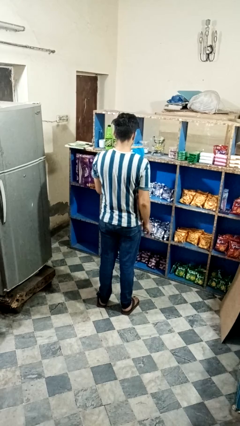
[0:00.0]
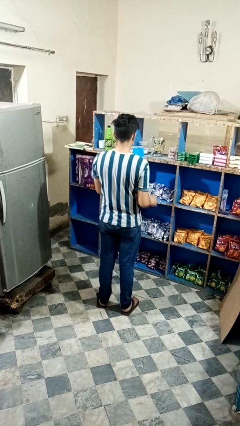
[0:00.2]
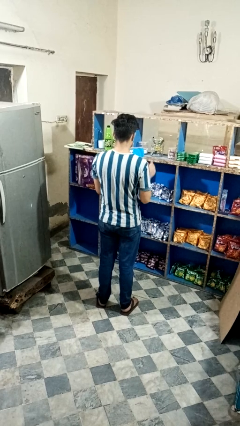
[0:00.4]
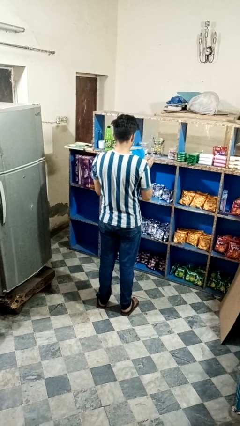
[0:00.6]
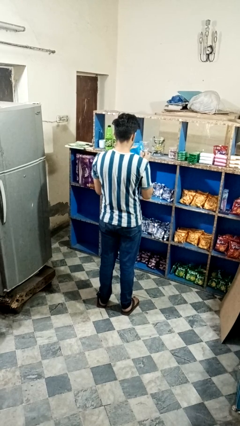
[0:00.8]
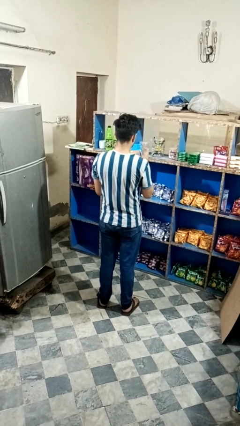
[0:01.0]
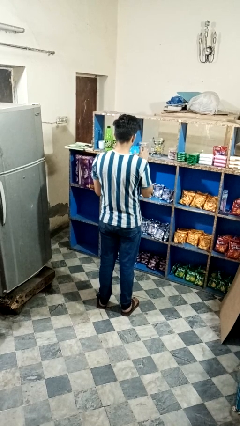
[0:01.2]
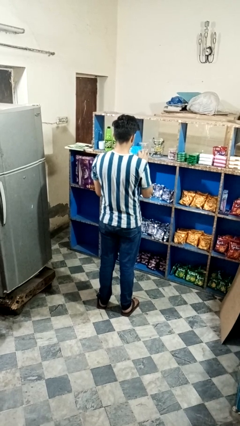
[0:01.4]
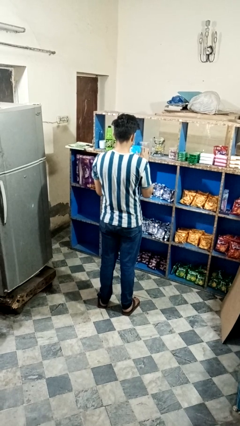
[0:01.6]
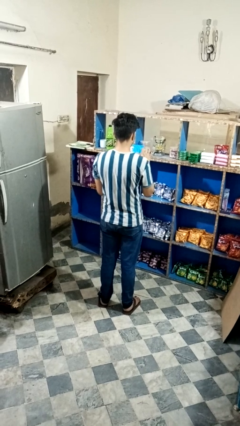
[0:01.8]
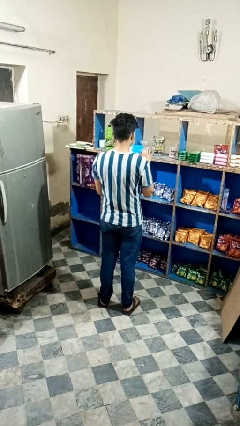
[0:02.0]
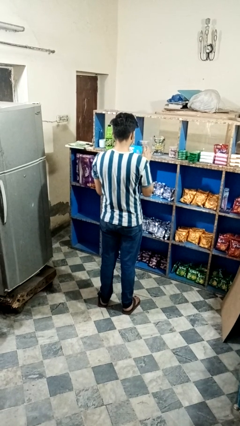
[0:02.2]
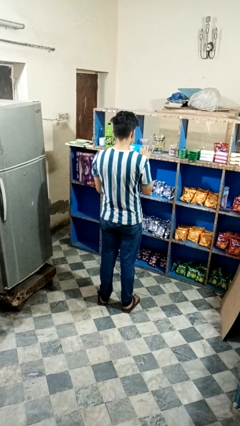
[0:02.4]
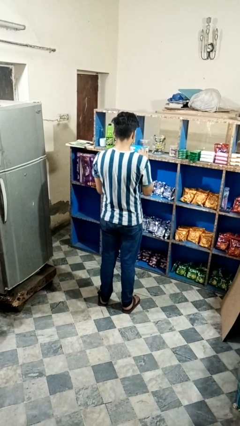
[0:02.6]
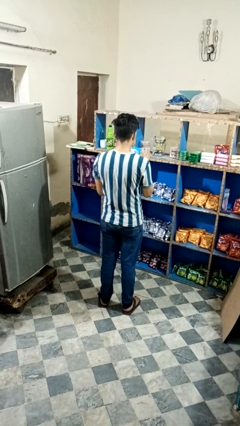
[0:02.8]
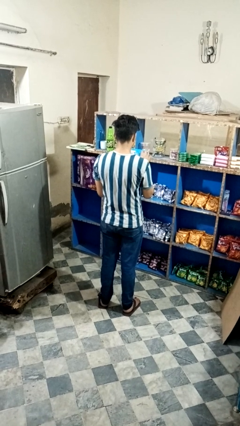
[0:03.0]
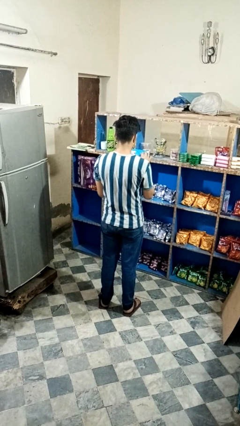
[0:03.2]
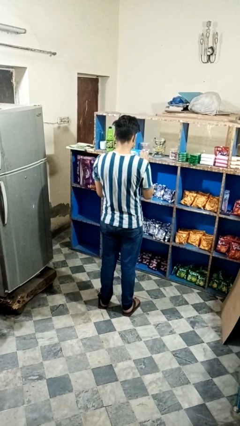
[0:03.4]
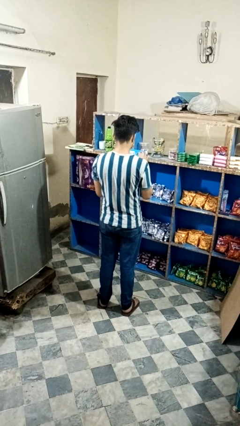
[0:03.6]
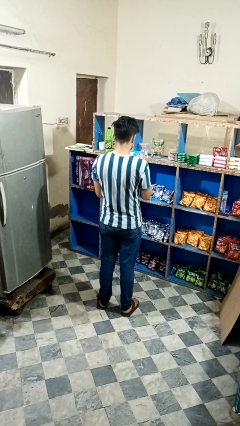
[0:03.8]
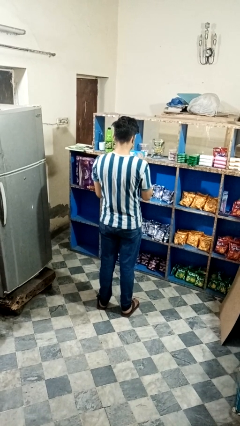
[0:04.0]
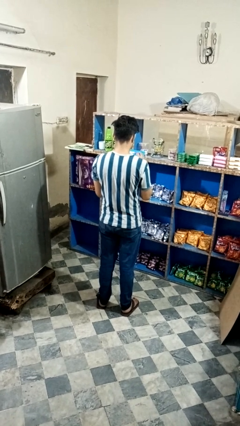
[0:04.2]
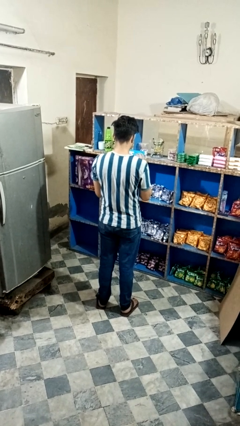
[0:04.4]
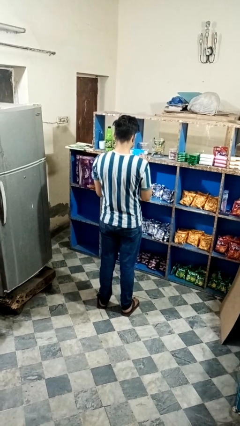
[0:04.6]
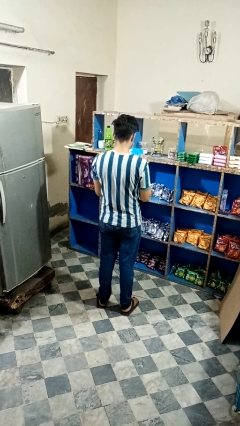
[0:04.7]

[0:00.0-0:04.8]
person taps object with finger

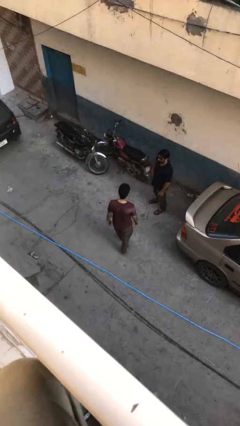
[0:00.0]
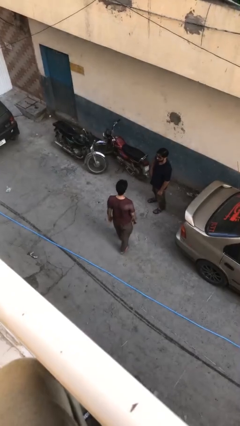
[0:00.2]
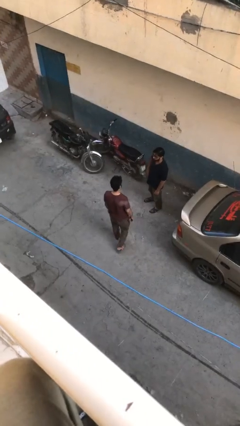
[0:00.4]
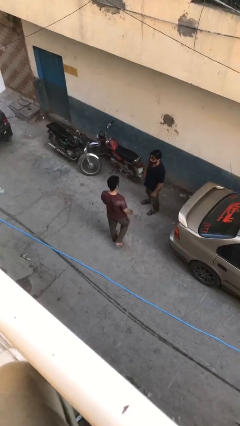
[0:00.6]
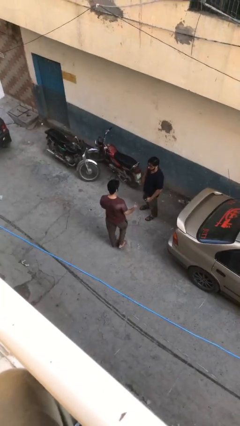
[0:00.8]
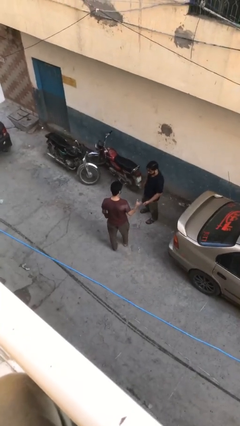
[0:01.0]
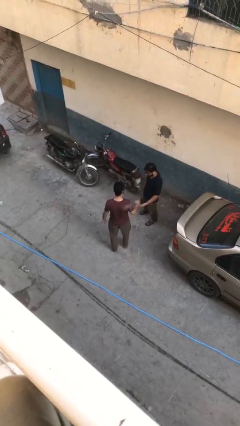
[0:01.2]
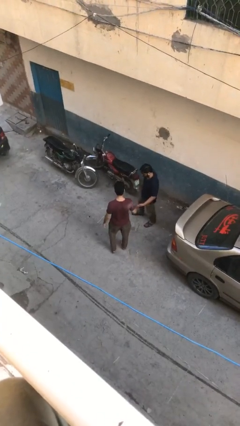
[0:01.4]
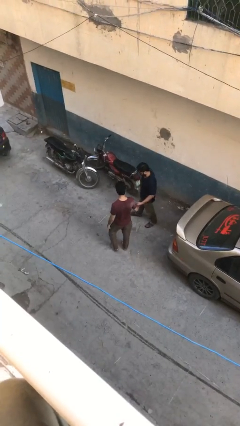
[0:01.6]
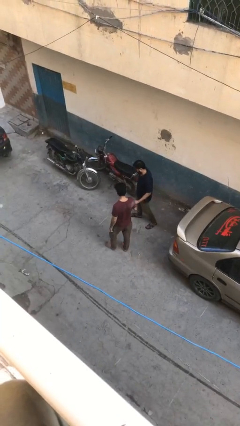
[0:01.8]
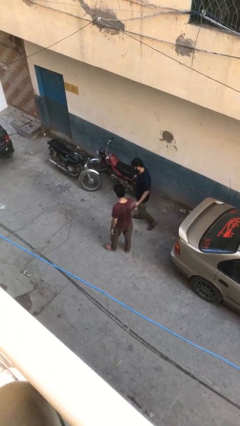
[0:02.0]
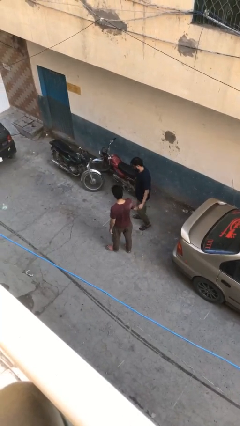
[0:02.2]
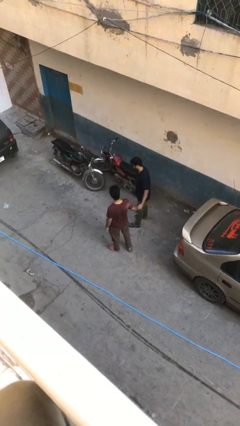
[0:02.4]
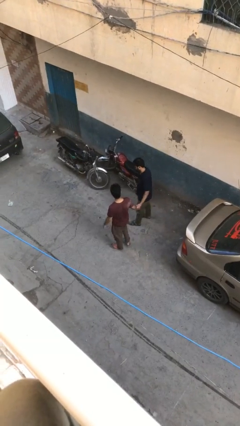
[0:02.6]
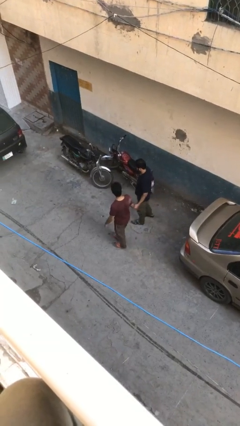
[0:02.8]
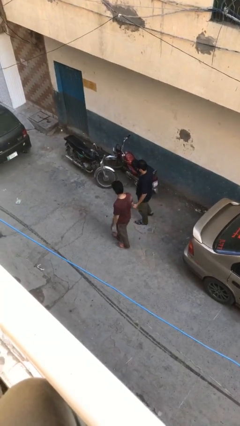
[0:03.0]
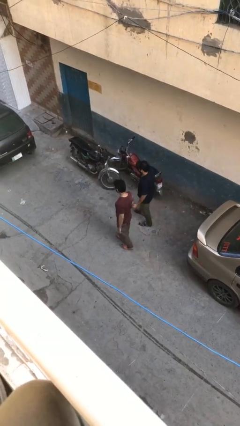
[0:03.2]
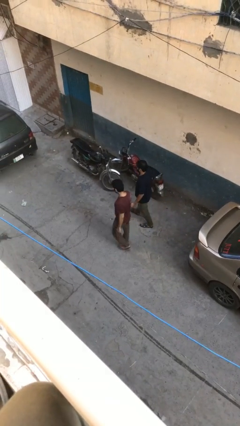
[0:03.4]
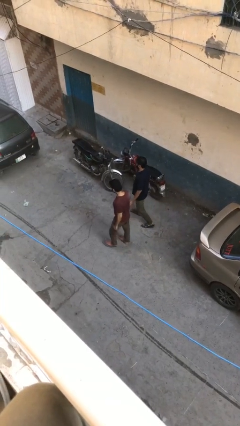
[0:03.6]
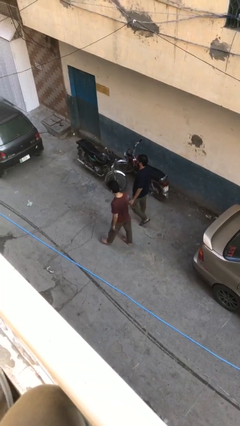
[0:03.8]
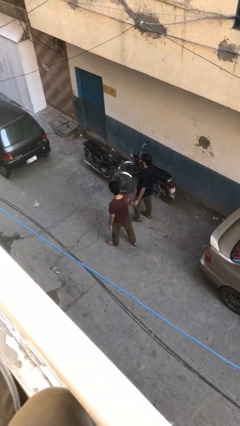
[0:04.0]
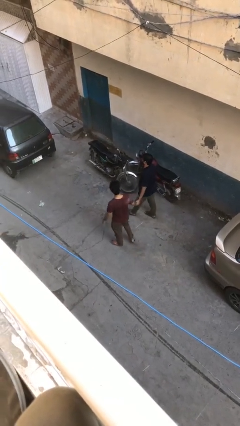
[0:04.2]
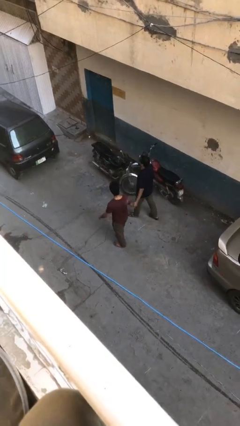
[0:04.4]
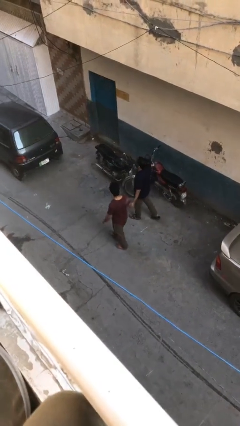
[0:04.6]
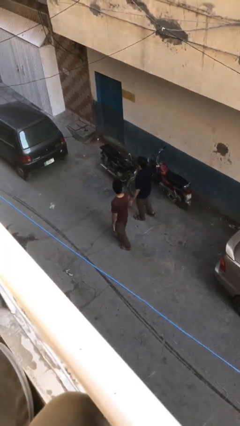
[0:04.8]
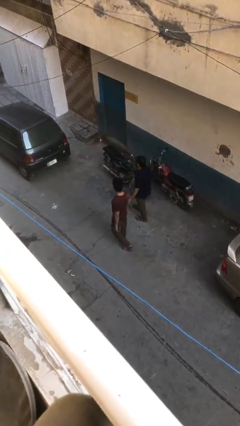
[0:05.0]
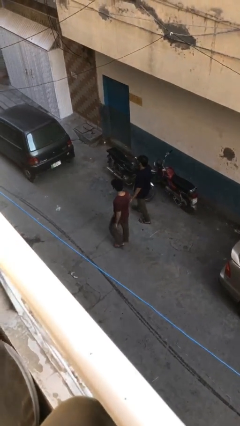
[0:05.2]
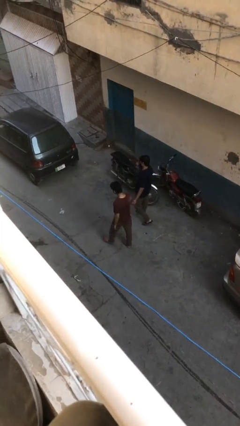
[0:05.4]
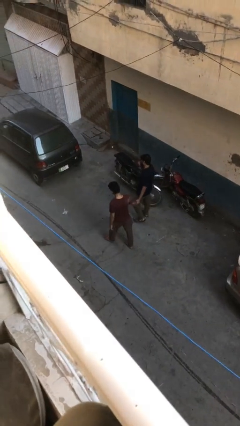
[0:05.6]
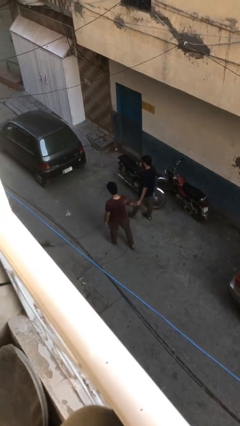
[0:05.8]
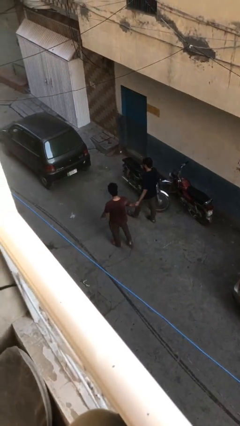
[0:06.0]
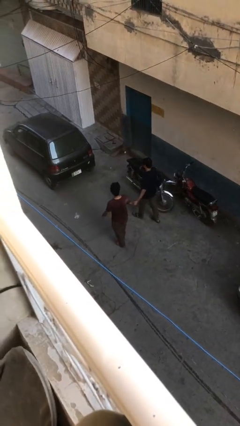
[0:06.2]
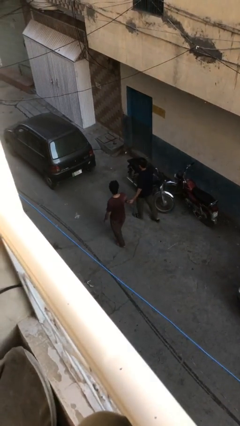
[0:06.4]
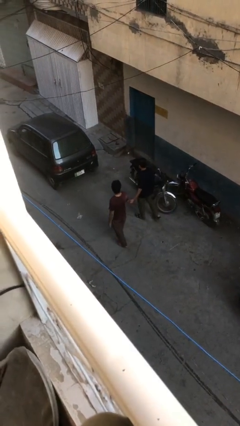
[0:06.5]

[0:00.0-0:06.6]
person holds hand

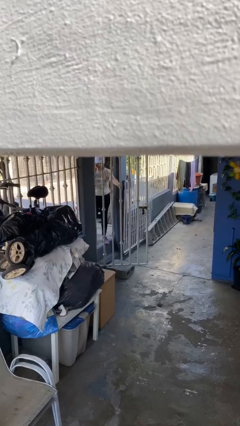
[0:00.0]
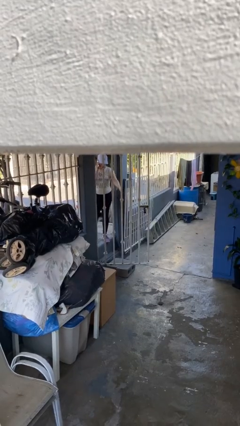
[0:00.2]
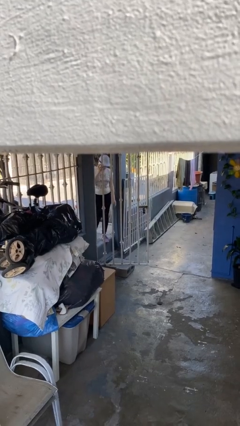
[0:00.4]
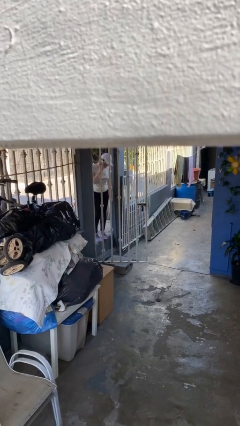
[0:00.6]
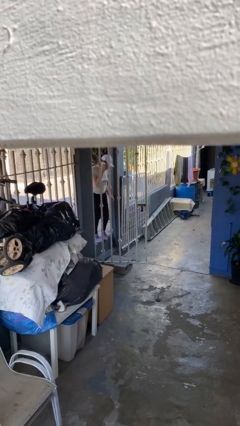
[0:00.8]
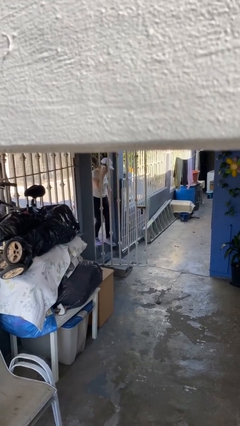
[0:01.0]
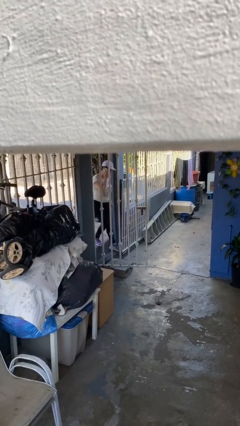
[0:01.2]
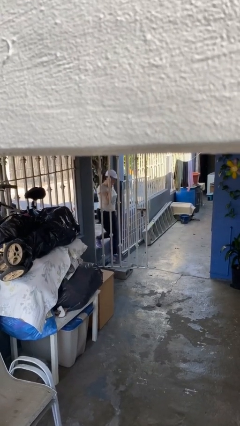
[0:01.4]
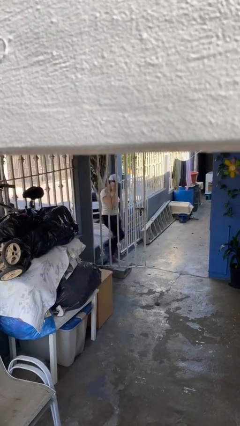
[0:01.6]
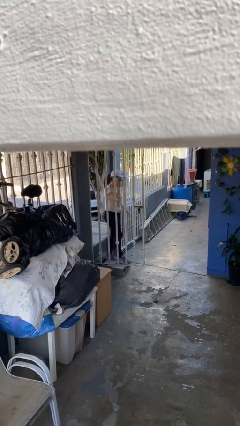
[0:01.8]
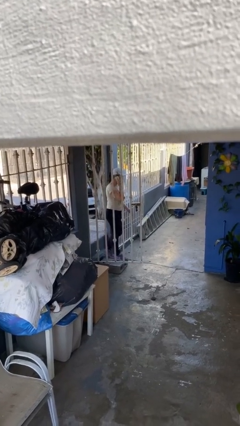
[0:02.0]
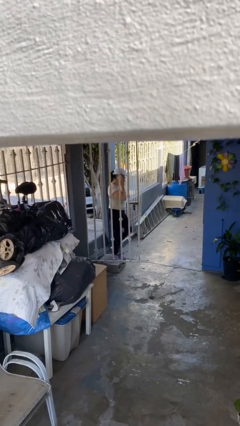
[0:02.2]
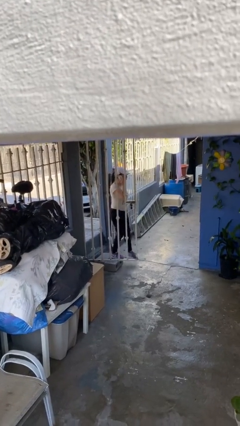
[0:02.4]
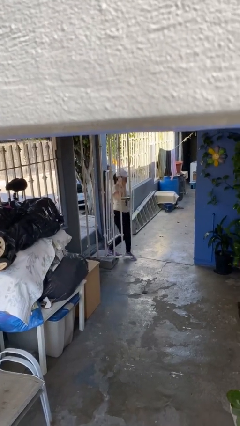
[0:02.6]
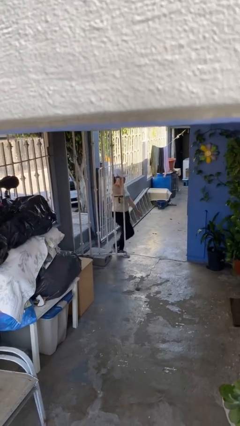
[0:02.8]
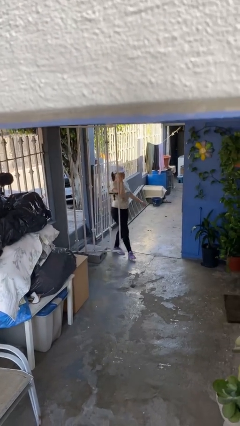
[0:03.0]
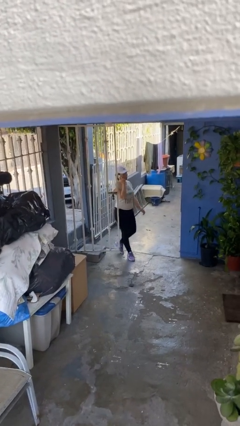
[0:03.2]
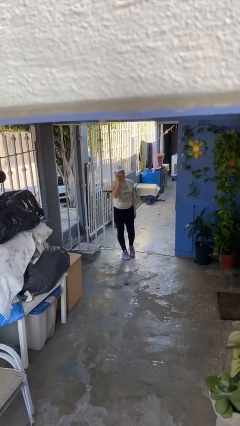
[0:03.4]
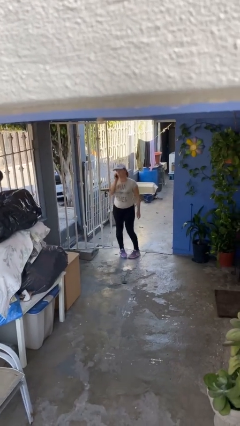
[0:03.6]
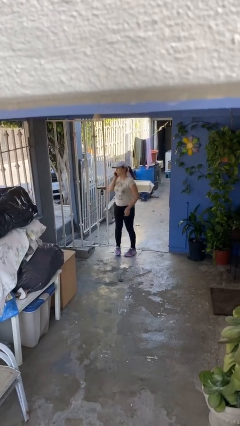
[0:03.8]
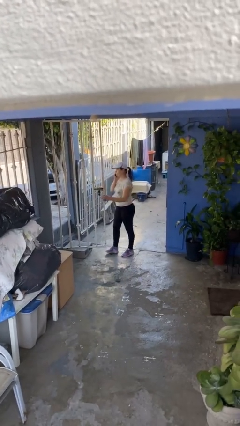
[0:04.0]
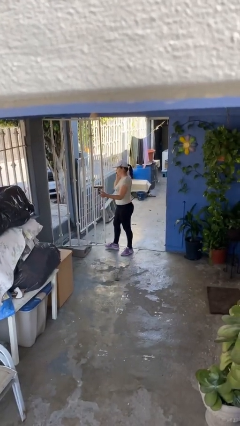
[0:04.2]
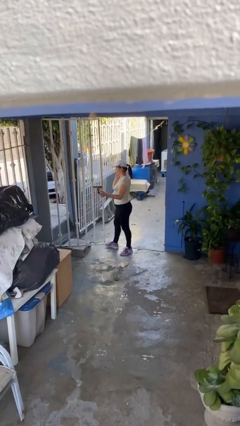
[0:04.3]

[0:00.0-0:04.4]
person enters scene through structure

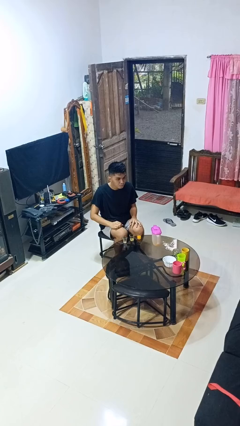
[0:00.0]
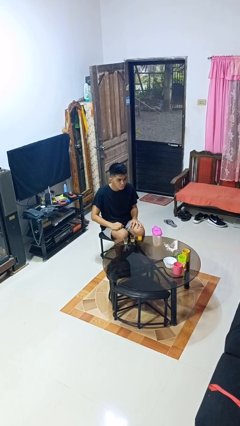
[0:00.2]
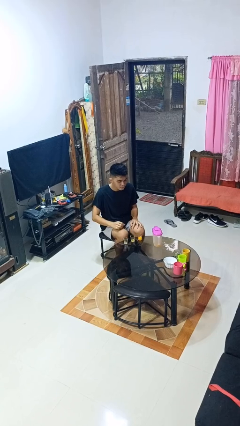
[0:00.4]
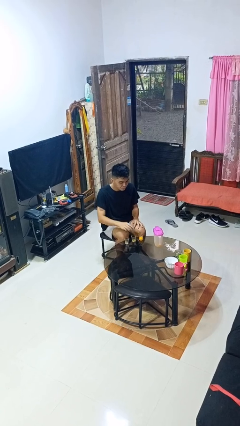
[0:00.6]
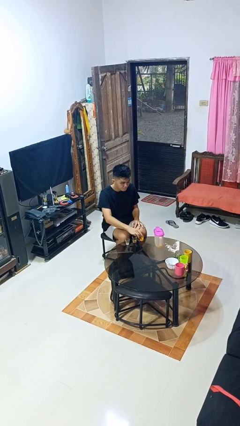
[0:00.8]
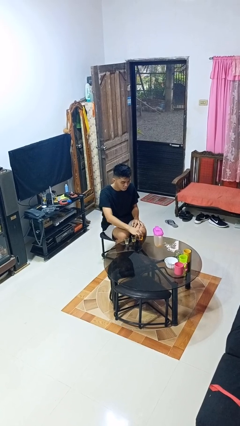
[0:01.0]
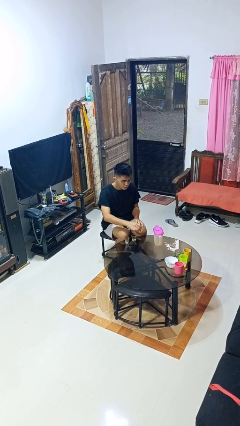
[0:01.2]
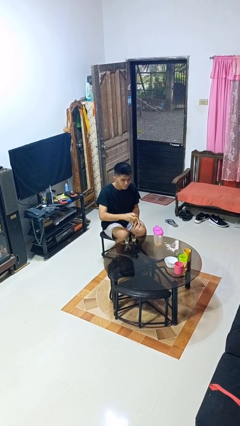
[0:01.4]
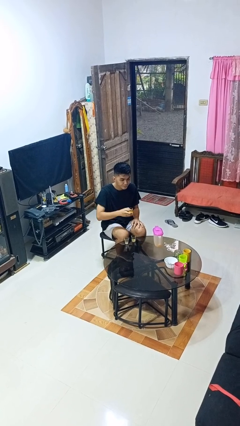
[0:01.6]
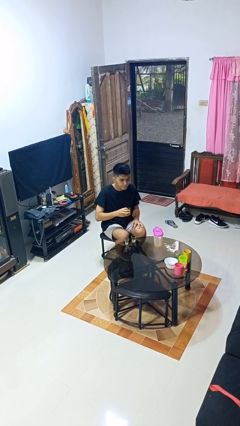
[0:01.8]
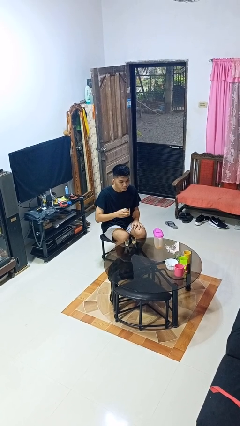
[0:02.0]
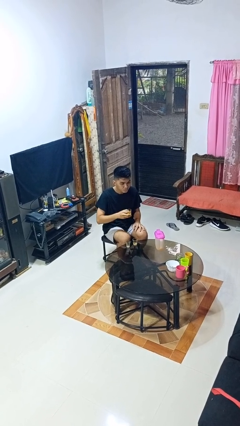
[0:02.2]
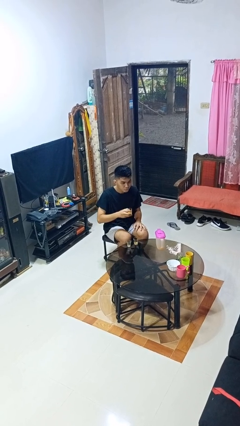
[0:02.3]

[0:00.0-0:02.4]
person picks up object from table
